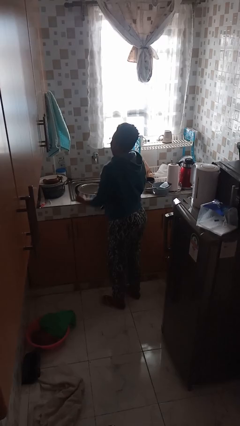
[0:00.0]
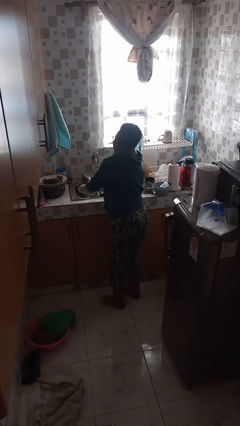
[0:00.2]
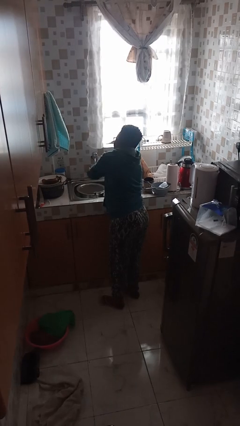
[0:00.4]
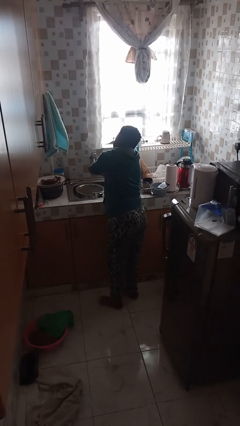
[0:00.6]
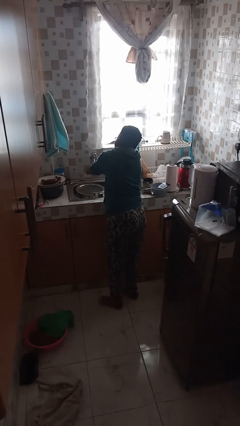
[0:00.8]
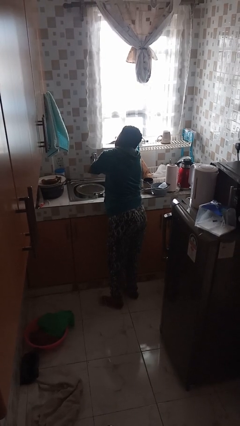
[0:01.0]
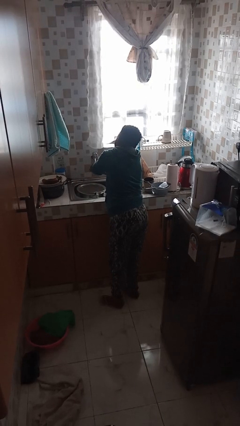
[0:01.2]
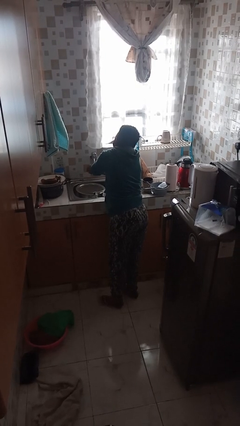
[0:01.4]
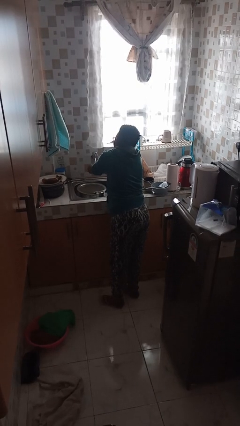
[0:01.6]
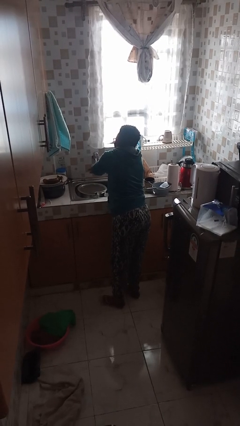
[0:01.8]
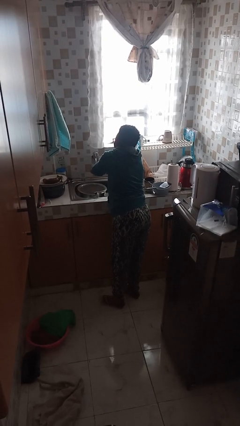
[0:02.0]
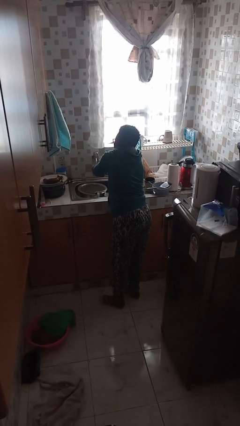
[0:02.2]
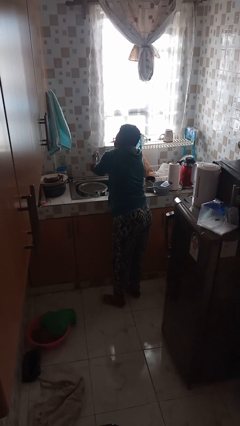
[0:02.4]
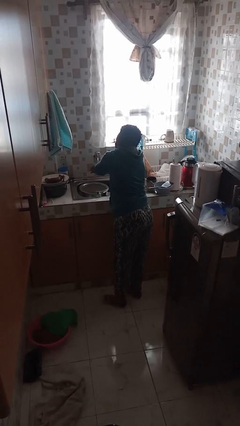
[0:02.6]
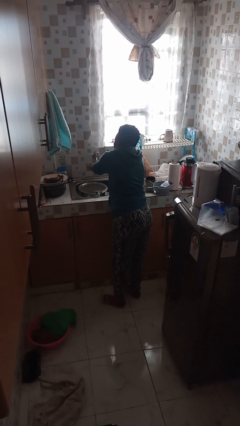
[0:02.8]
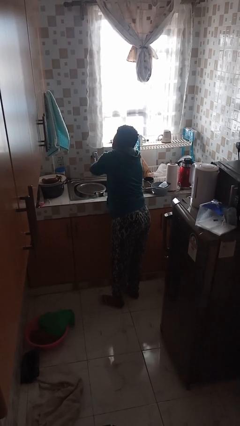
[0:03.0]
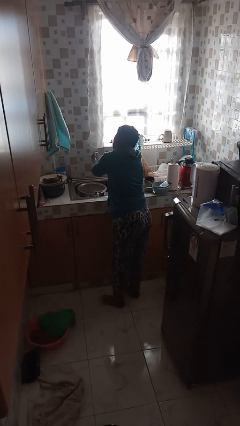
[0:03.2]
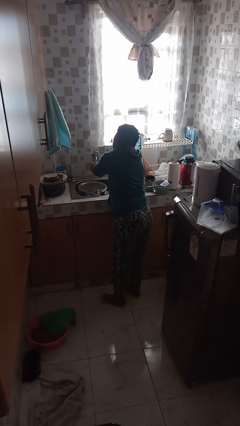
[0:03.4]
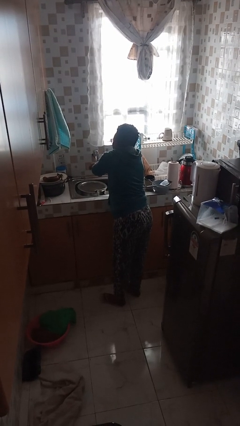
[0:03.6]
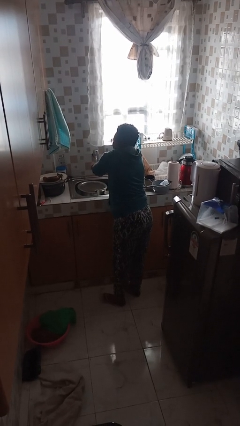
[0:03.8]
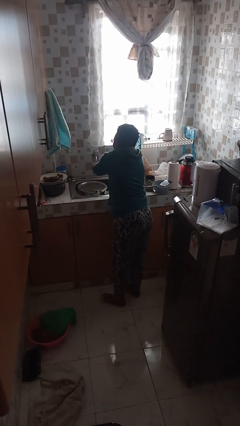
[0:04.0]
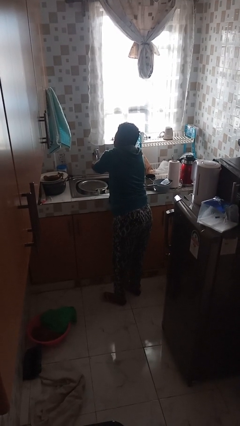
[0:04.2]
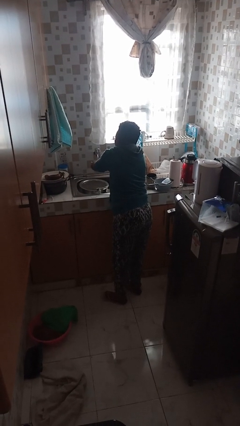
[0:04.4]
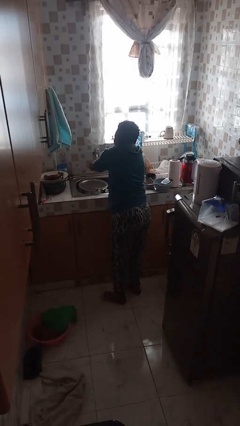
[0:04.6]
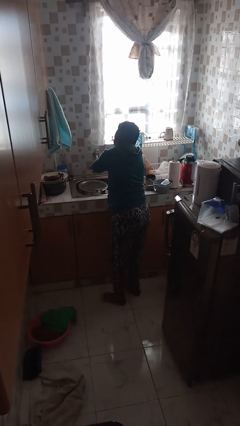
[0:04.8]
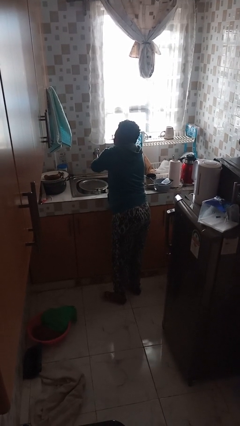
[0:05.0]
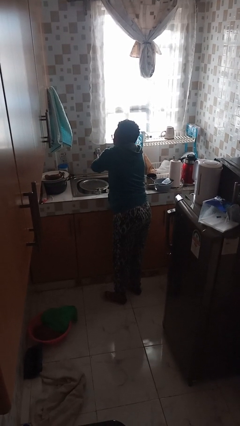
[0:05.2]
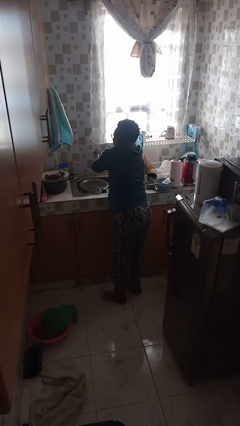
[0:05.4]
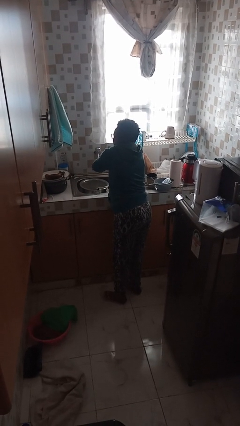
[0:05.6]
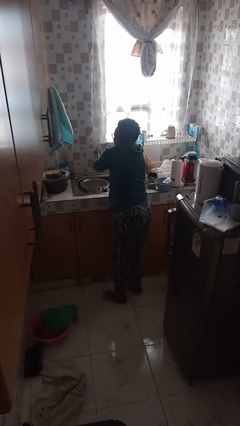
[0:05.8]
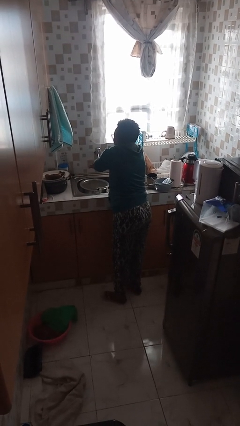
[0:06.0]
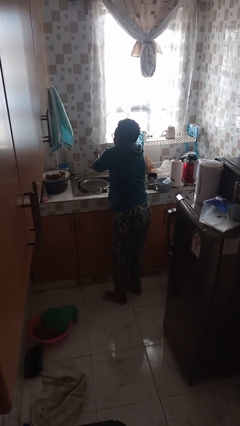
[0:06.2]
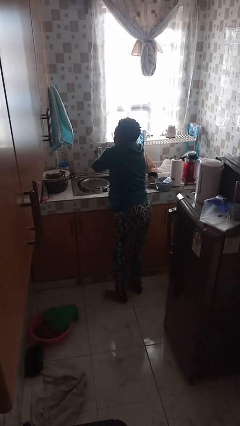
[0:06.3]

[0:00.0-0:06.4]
person washes hands

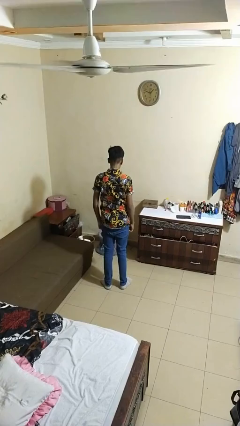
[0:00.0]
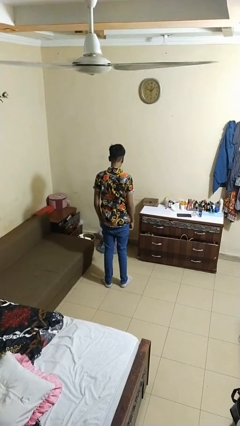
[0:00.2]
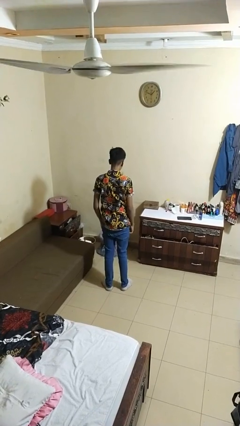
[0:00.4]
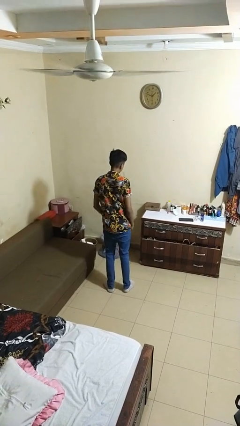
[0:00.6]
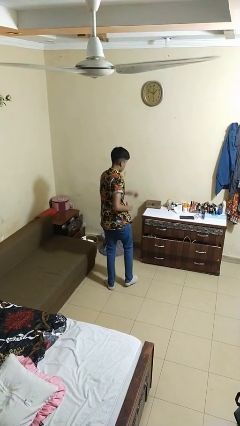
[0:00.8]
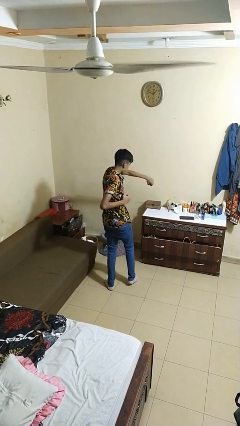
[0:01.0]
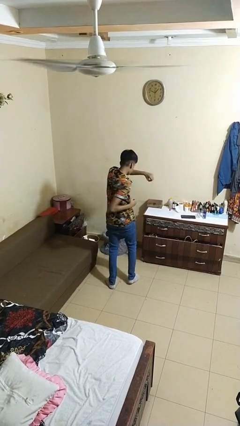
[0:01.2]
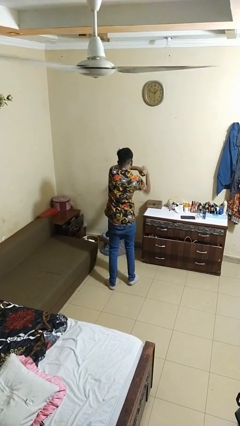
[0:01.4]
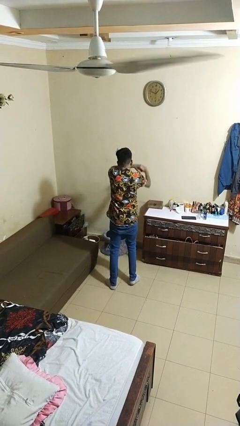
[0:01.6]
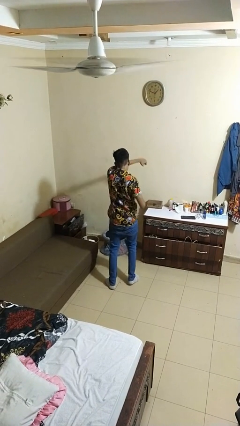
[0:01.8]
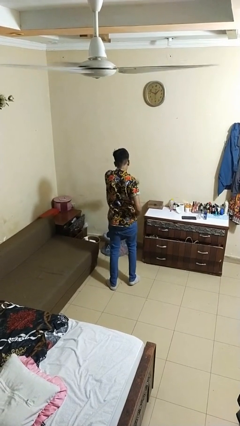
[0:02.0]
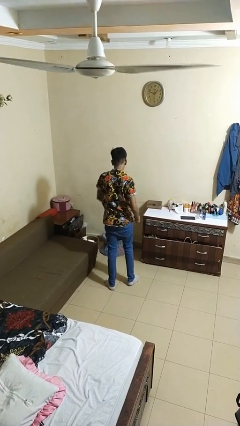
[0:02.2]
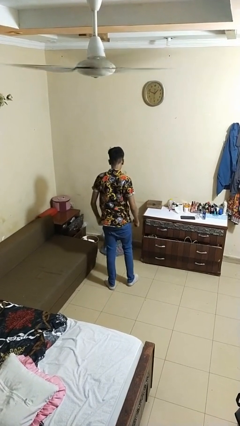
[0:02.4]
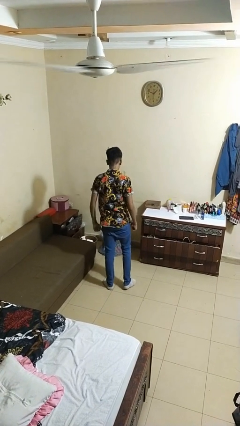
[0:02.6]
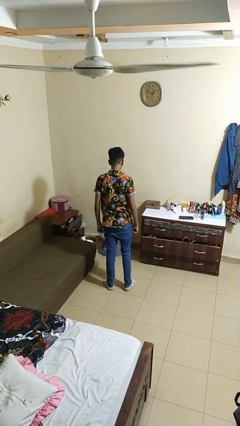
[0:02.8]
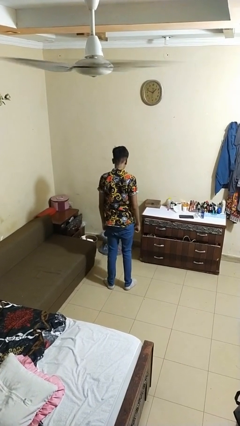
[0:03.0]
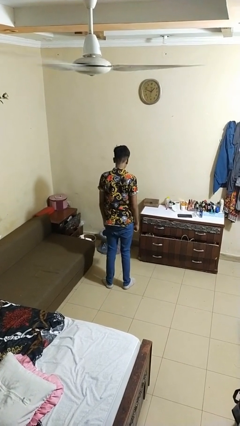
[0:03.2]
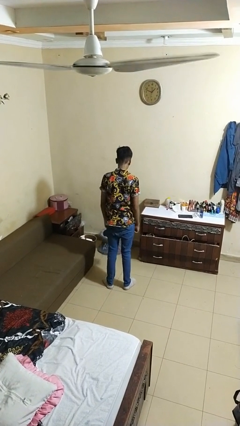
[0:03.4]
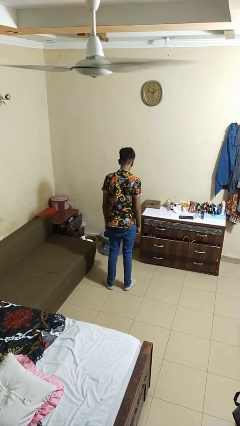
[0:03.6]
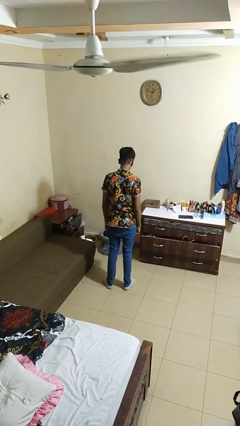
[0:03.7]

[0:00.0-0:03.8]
person punches

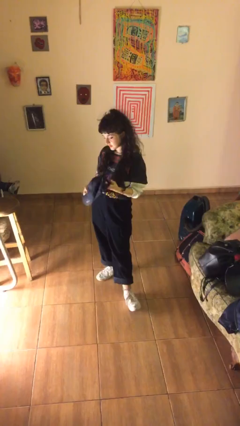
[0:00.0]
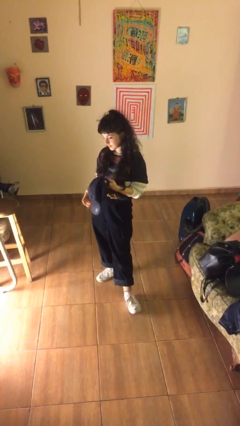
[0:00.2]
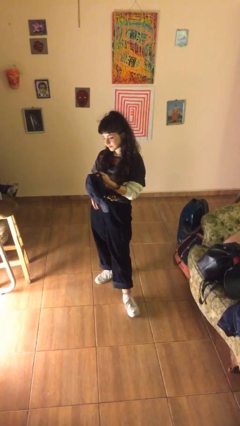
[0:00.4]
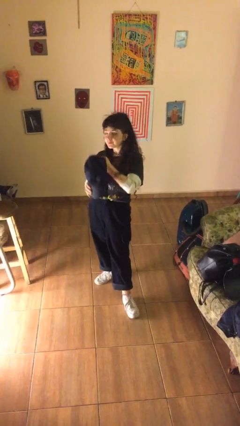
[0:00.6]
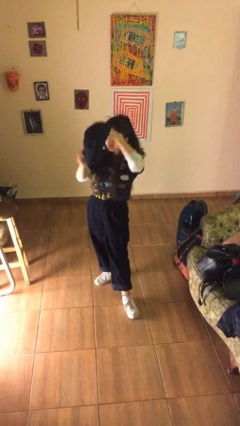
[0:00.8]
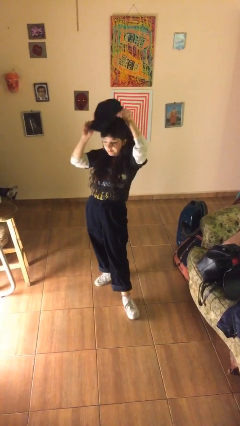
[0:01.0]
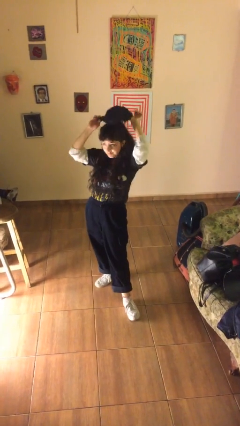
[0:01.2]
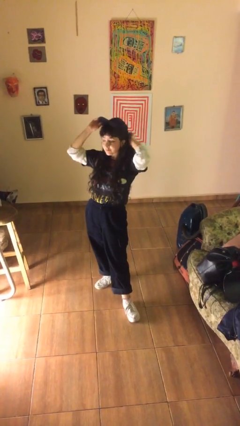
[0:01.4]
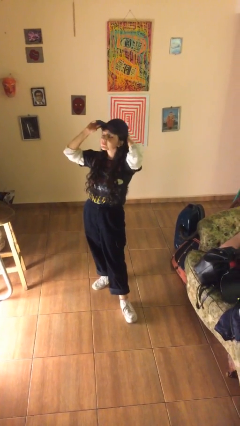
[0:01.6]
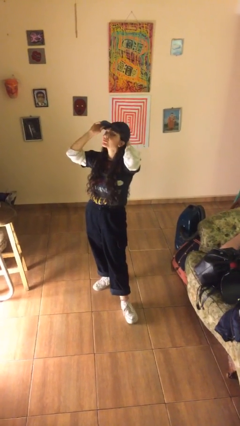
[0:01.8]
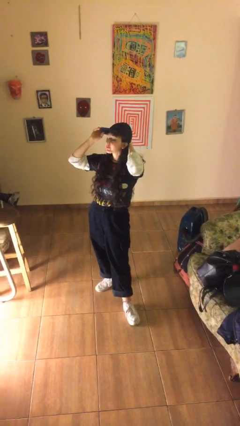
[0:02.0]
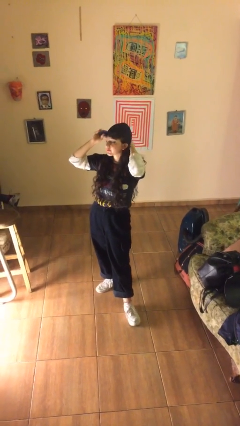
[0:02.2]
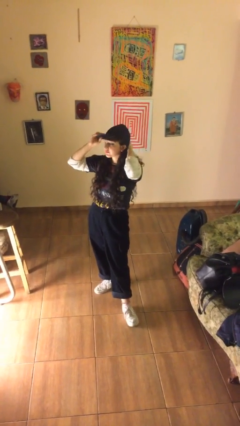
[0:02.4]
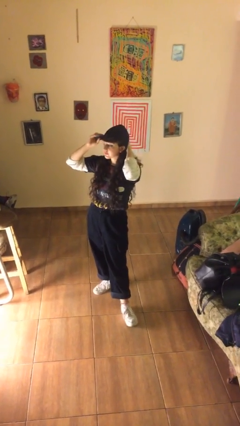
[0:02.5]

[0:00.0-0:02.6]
person puts on hat

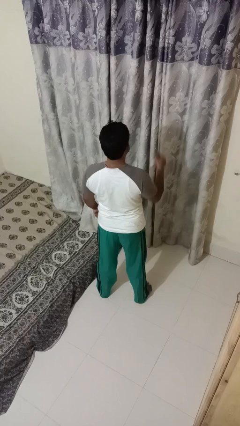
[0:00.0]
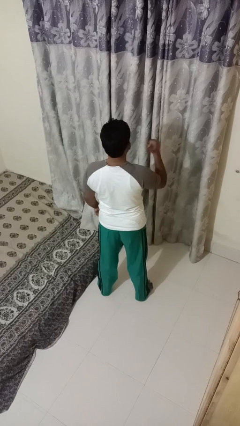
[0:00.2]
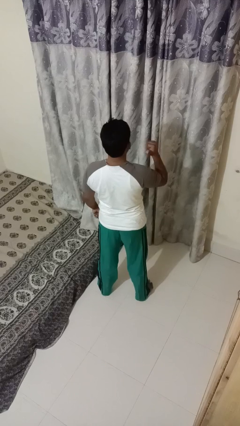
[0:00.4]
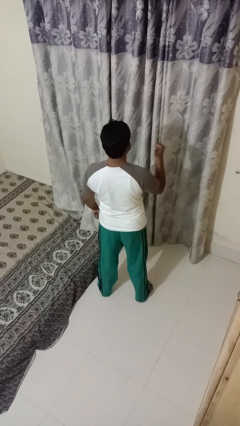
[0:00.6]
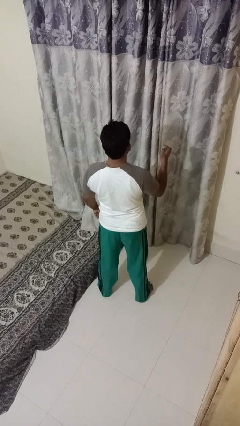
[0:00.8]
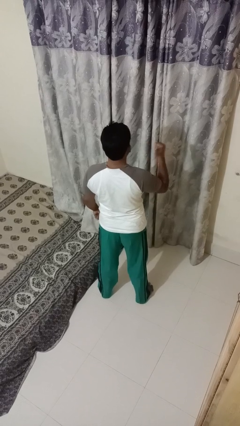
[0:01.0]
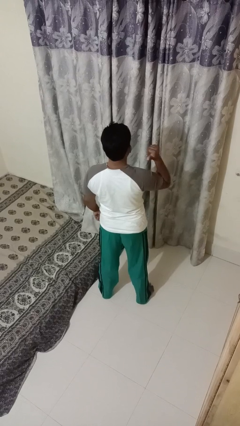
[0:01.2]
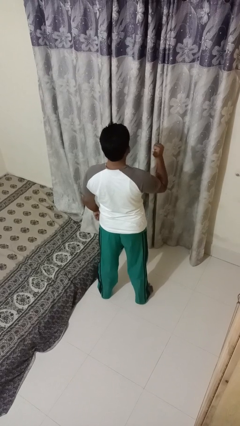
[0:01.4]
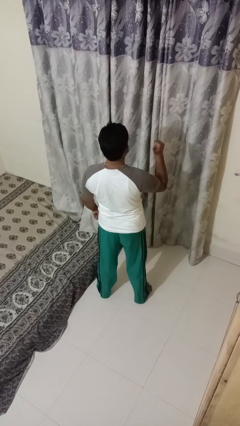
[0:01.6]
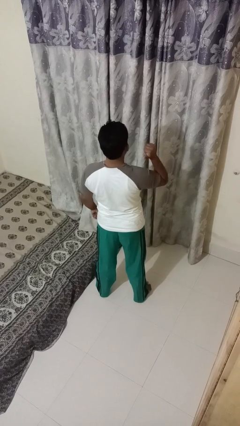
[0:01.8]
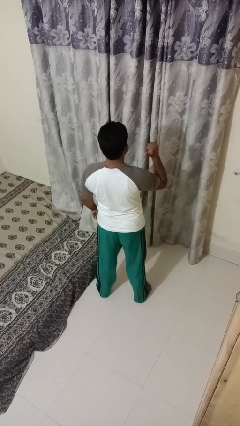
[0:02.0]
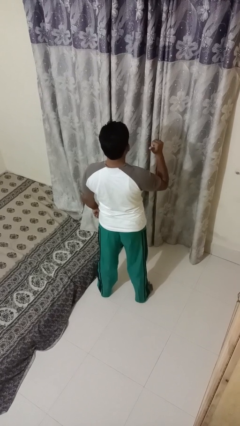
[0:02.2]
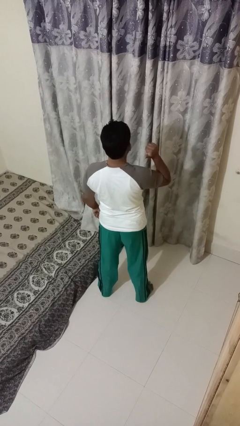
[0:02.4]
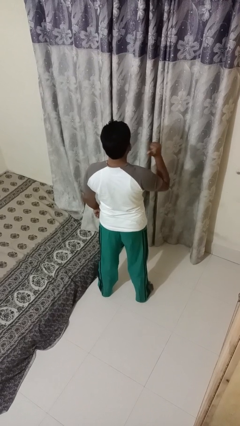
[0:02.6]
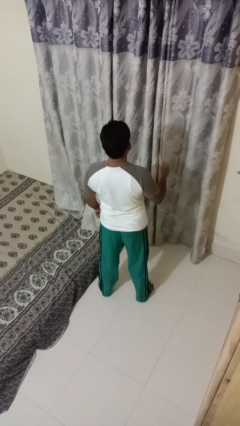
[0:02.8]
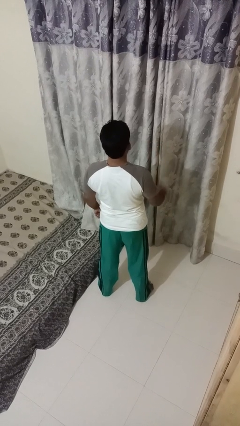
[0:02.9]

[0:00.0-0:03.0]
person gestures behind me

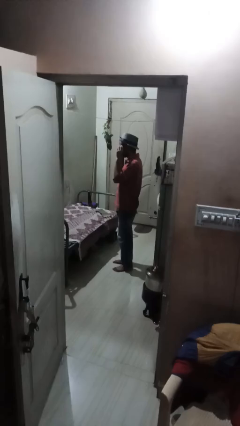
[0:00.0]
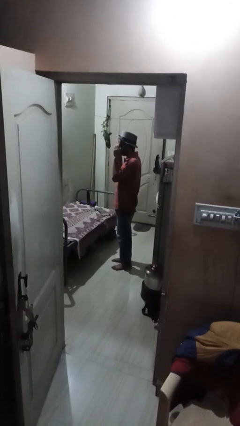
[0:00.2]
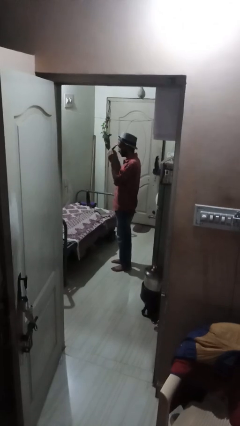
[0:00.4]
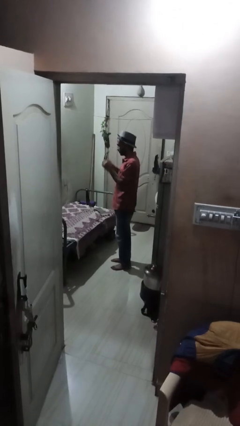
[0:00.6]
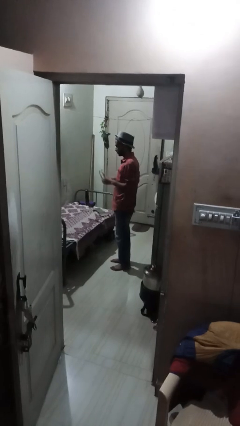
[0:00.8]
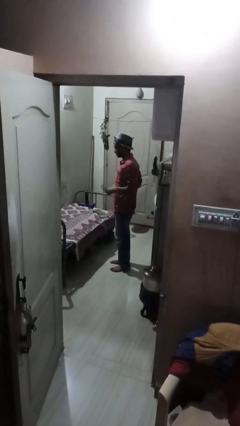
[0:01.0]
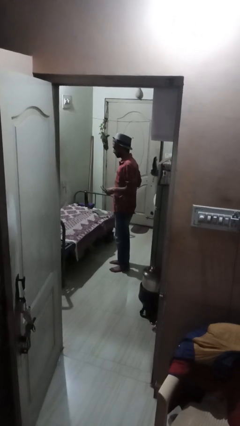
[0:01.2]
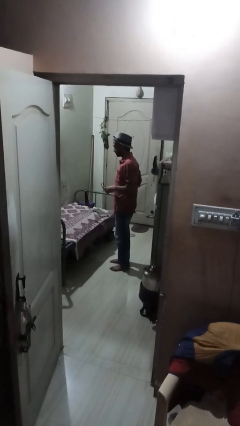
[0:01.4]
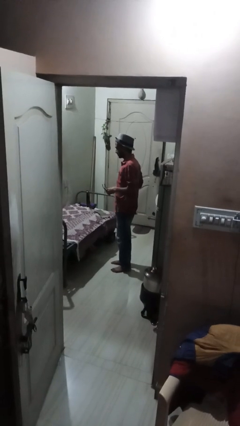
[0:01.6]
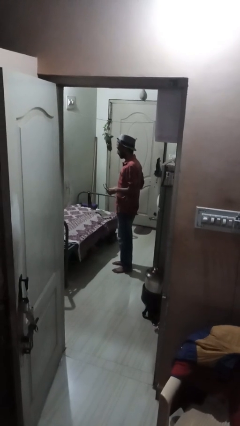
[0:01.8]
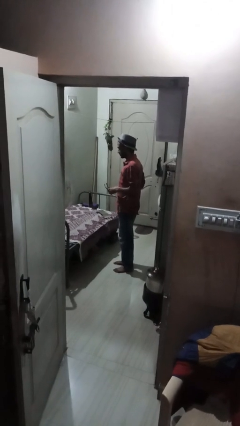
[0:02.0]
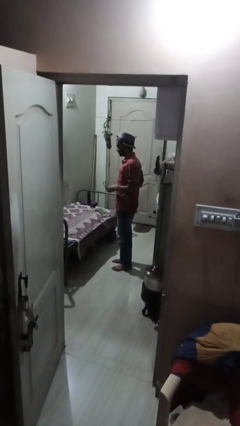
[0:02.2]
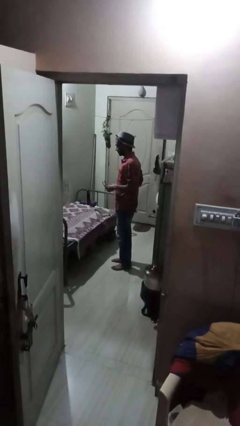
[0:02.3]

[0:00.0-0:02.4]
person takes off glasses
